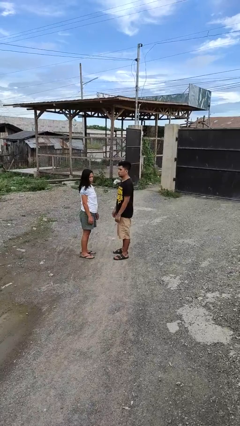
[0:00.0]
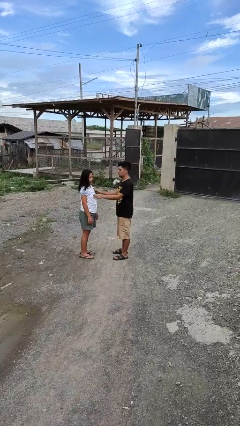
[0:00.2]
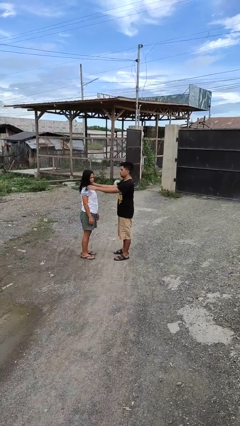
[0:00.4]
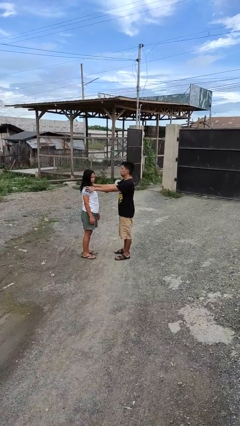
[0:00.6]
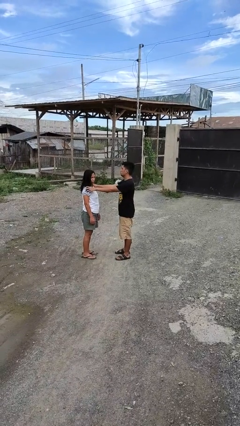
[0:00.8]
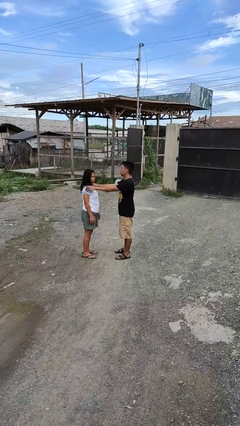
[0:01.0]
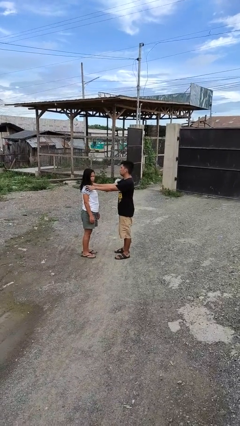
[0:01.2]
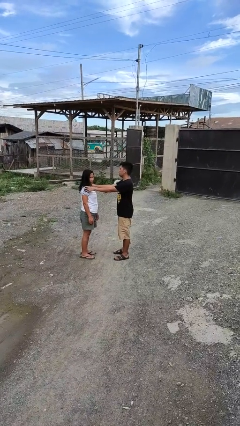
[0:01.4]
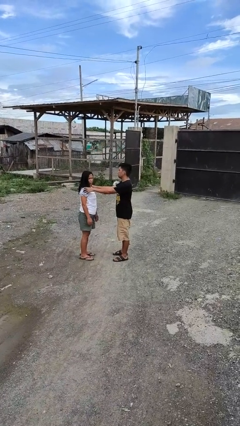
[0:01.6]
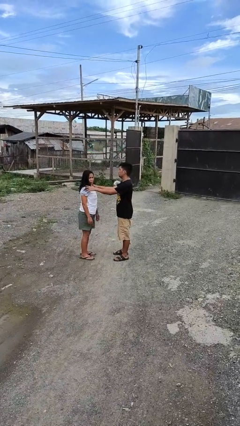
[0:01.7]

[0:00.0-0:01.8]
person grabs person by shoulder

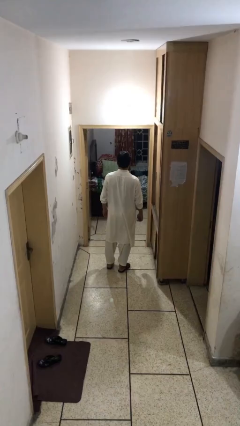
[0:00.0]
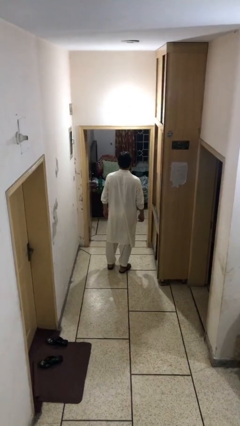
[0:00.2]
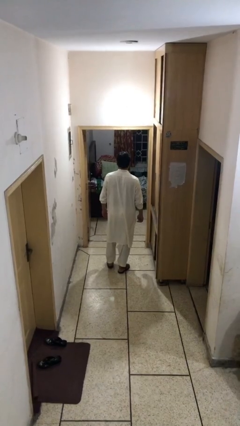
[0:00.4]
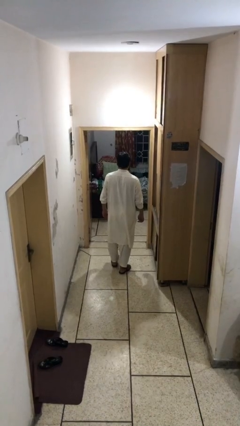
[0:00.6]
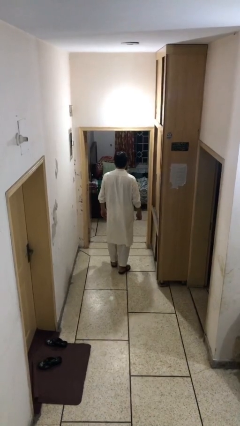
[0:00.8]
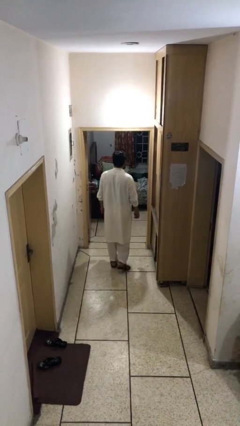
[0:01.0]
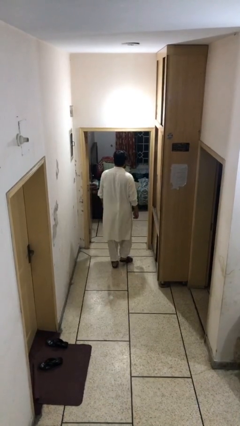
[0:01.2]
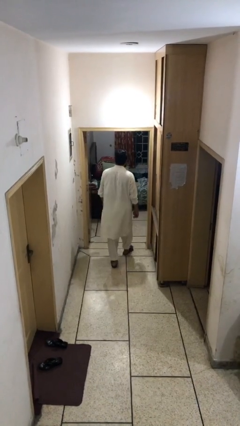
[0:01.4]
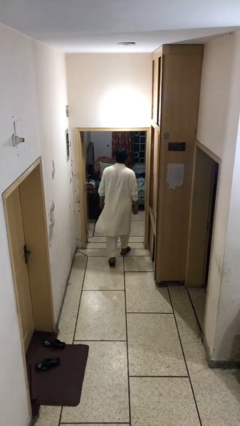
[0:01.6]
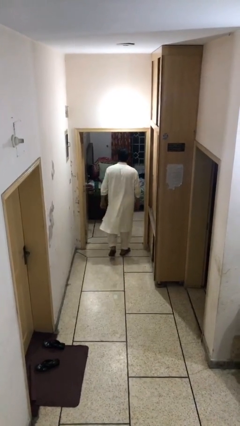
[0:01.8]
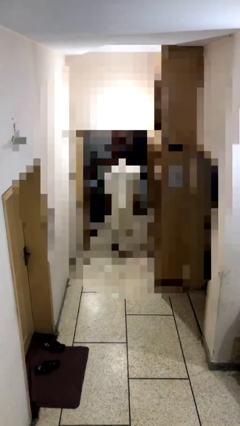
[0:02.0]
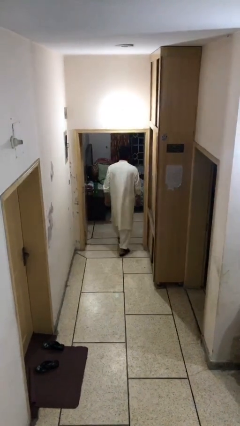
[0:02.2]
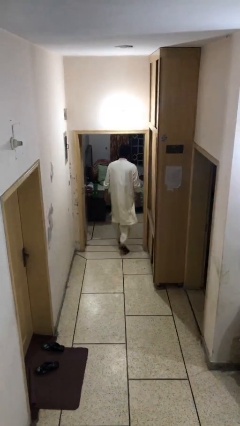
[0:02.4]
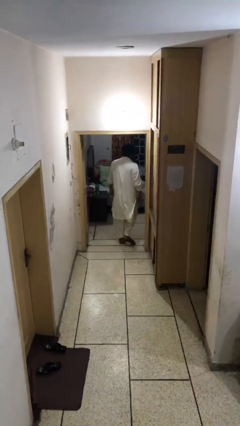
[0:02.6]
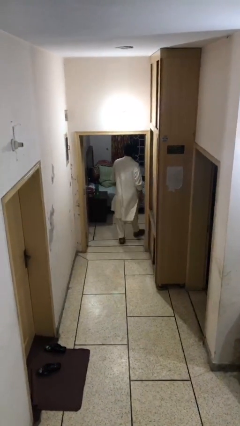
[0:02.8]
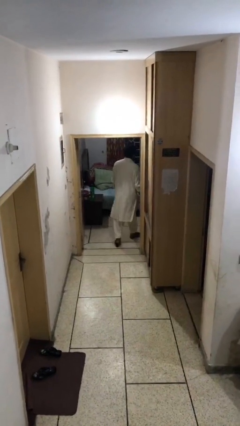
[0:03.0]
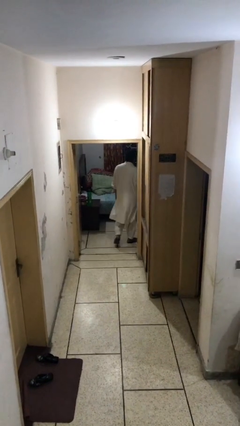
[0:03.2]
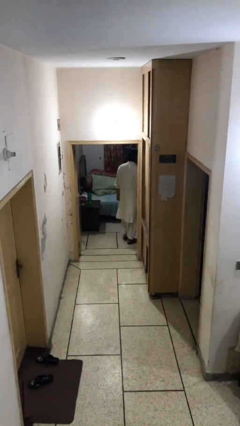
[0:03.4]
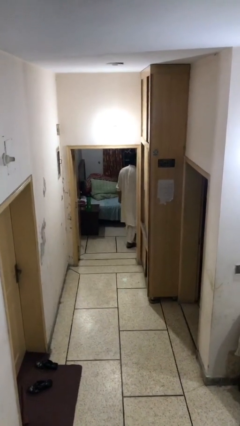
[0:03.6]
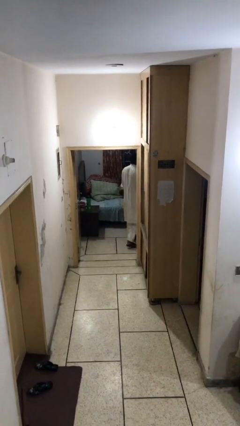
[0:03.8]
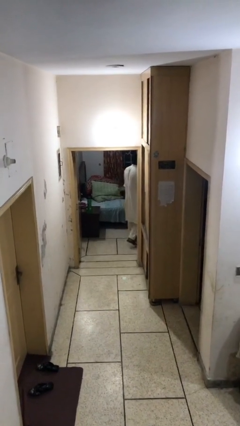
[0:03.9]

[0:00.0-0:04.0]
person exits scene through structure

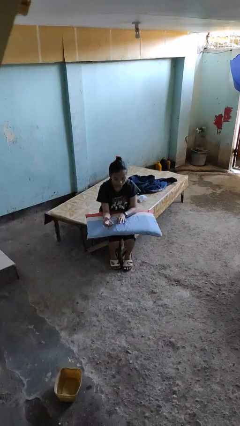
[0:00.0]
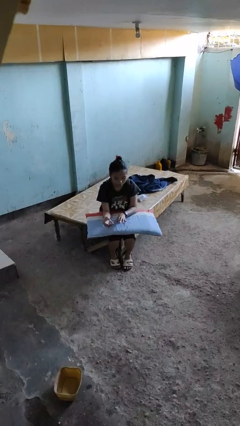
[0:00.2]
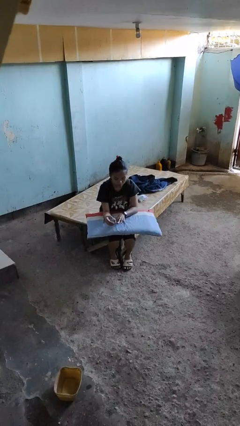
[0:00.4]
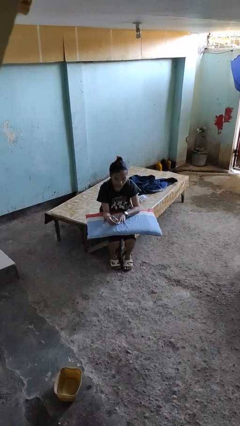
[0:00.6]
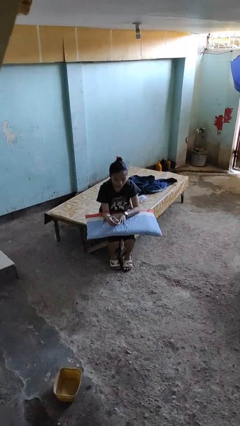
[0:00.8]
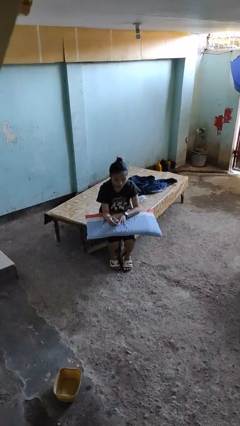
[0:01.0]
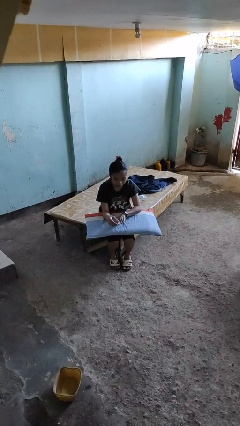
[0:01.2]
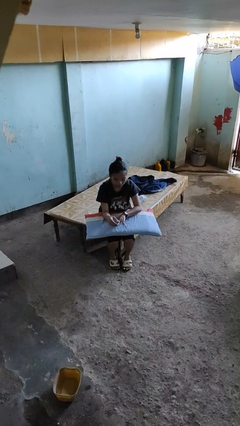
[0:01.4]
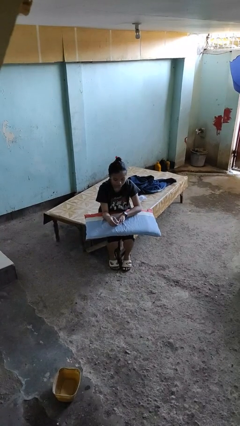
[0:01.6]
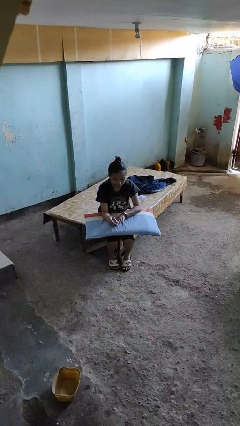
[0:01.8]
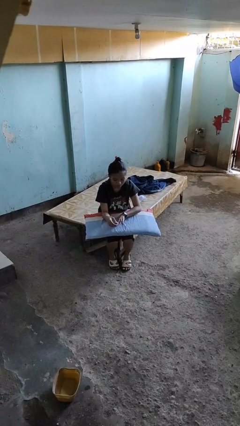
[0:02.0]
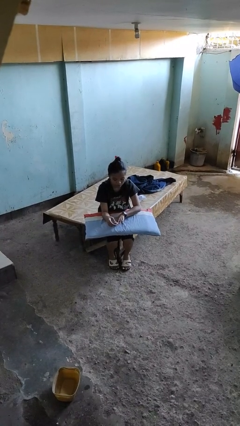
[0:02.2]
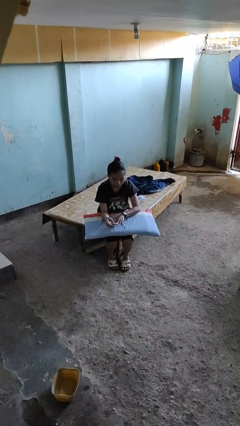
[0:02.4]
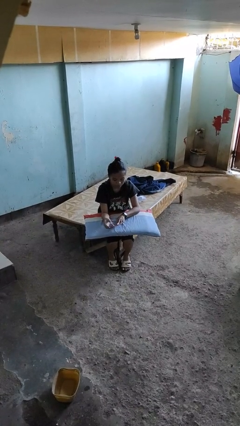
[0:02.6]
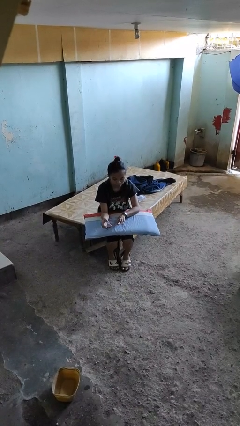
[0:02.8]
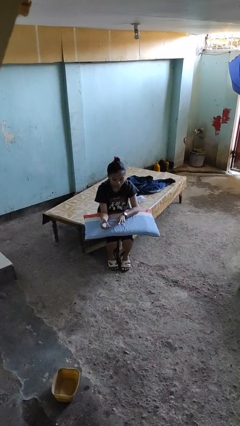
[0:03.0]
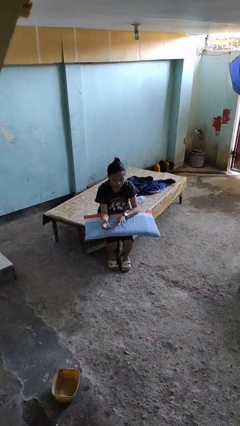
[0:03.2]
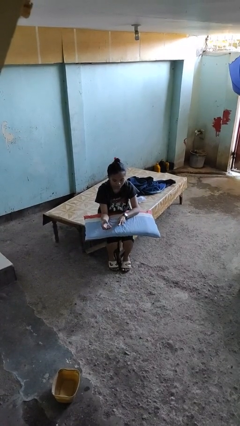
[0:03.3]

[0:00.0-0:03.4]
person clips fingernails

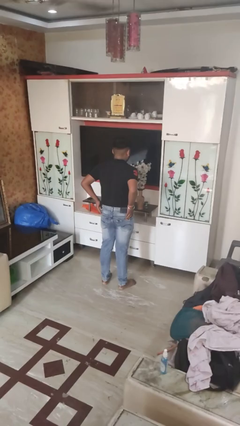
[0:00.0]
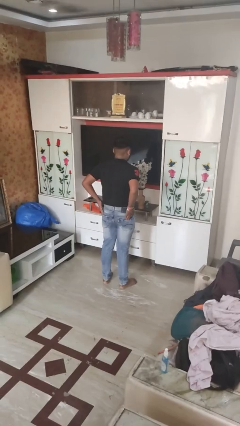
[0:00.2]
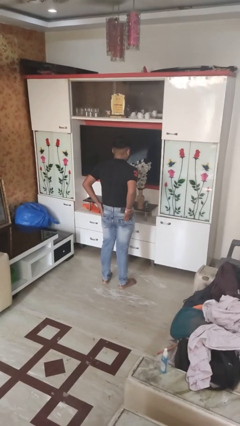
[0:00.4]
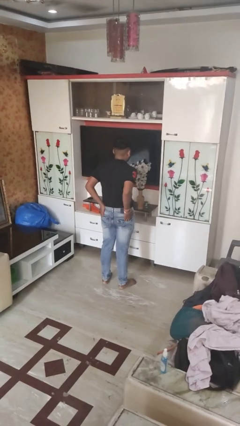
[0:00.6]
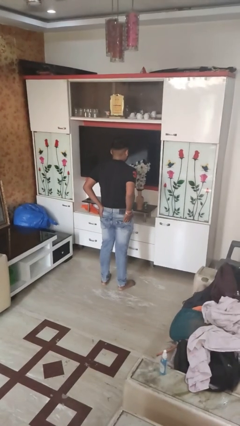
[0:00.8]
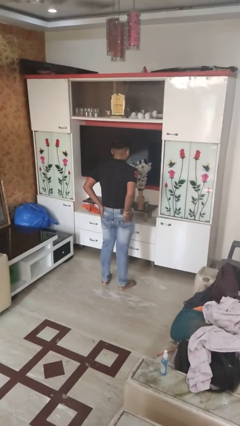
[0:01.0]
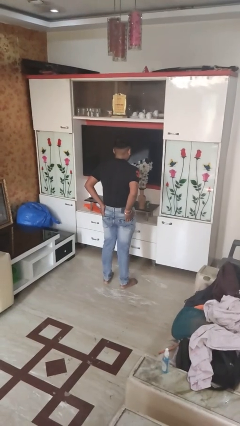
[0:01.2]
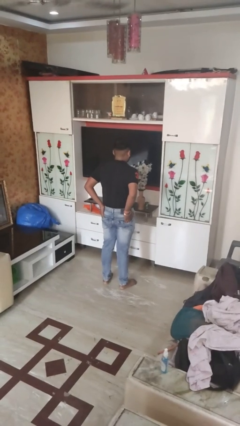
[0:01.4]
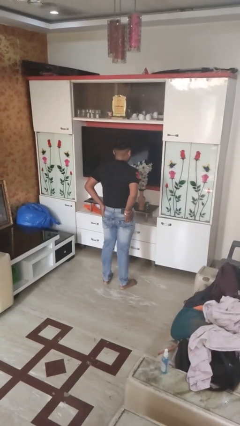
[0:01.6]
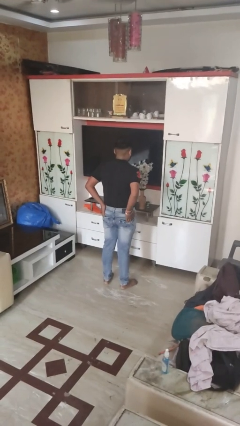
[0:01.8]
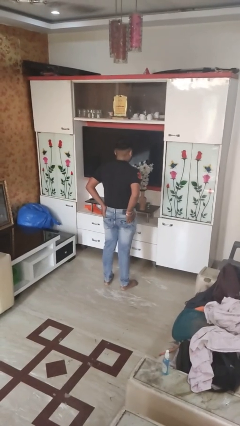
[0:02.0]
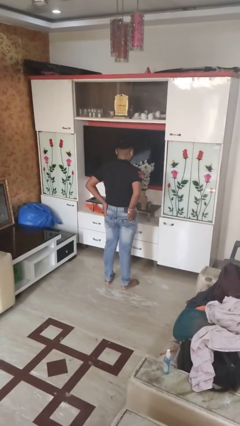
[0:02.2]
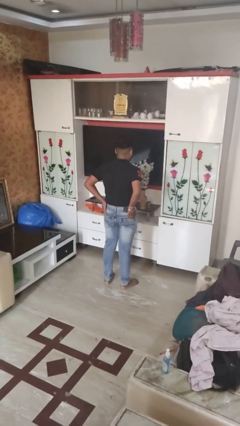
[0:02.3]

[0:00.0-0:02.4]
person puts hands in back pockets

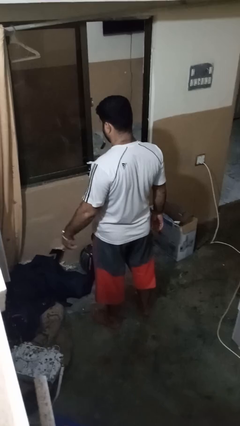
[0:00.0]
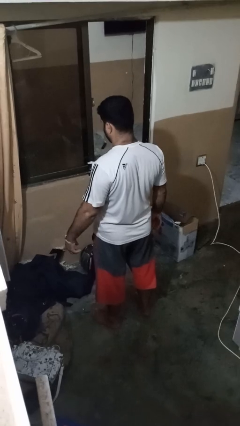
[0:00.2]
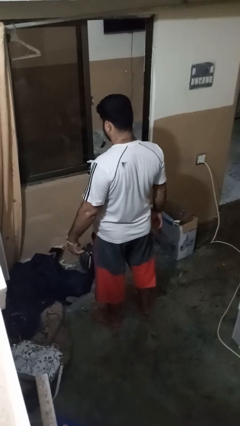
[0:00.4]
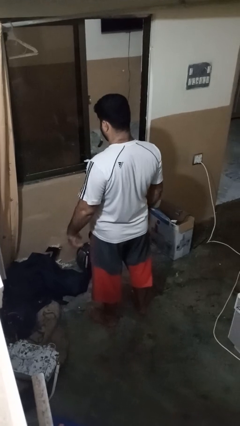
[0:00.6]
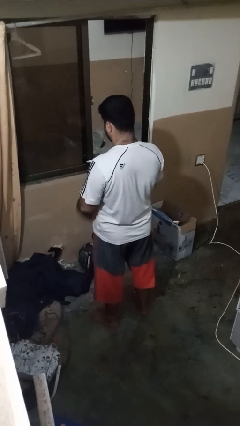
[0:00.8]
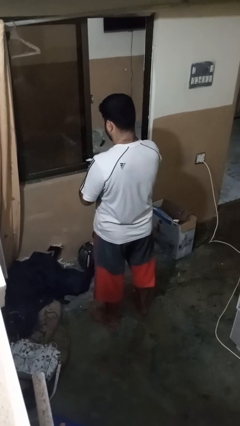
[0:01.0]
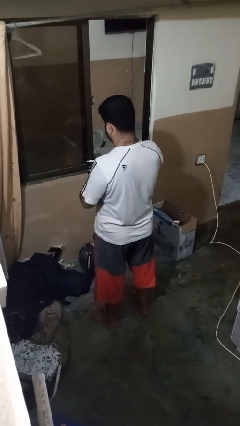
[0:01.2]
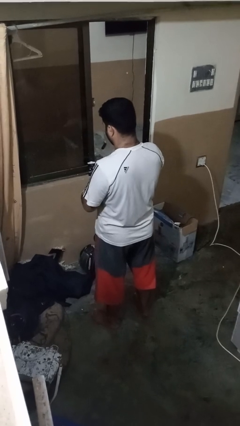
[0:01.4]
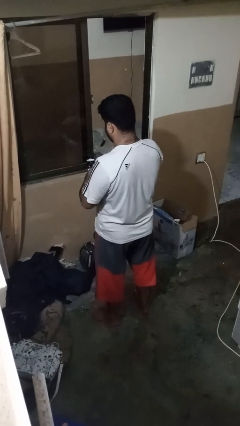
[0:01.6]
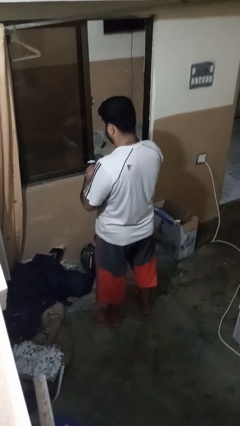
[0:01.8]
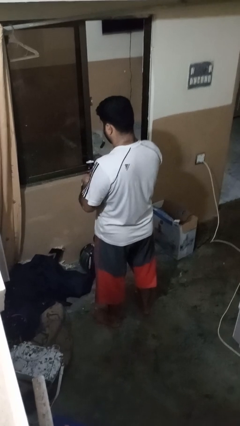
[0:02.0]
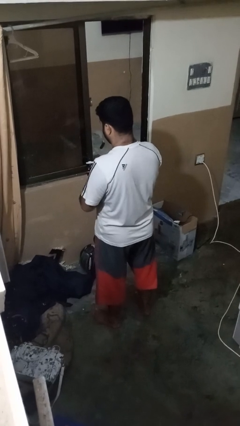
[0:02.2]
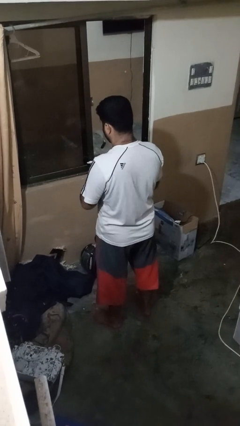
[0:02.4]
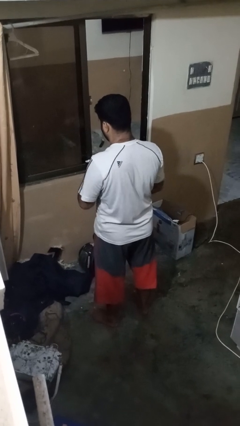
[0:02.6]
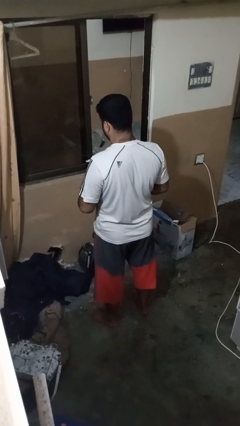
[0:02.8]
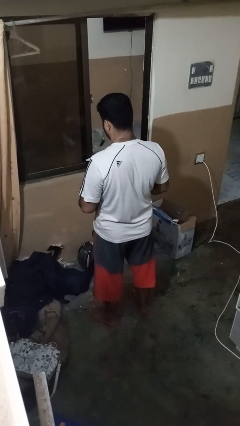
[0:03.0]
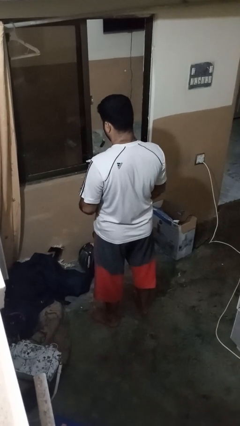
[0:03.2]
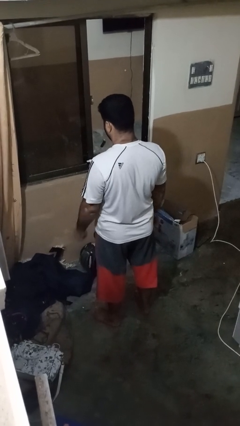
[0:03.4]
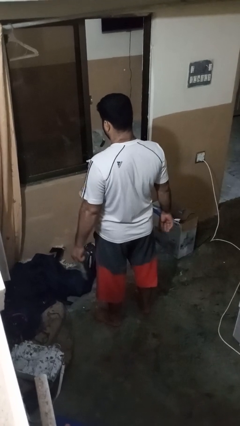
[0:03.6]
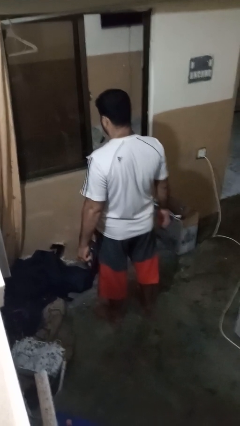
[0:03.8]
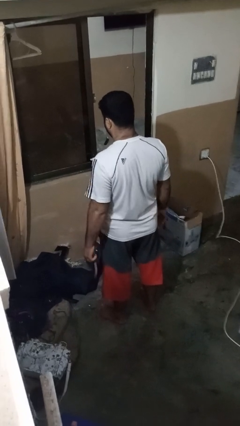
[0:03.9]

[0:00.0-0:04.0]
person takes off wristwatch

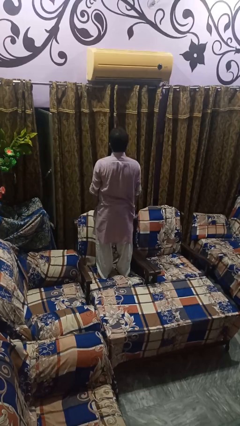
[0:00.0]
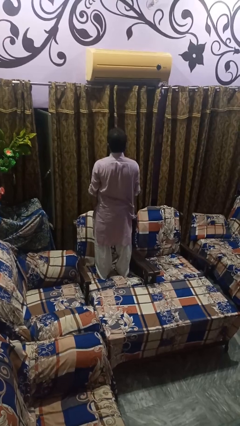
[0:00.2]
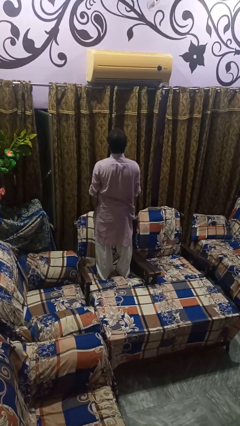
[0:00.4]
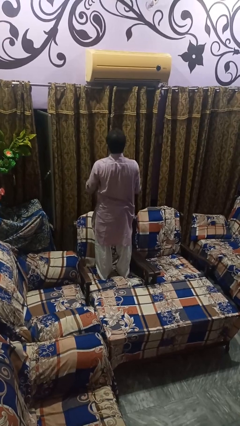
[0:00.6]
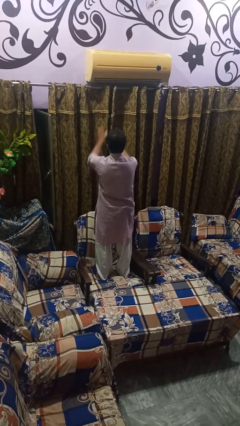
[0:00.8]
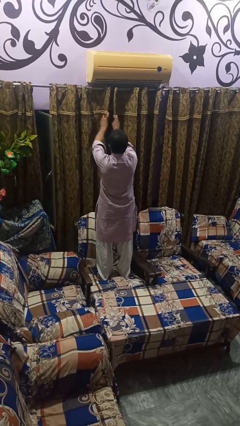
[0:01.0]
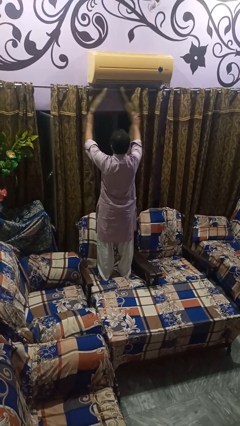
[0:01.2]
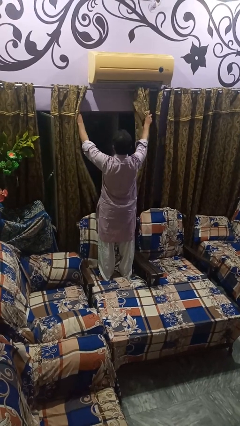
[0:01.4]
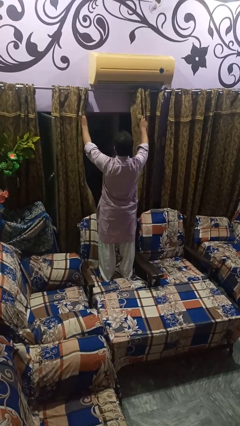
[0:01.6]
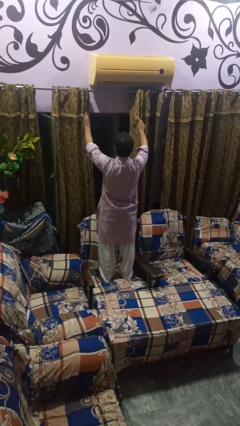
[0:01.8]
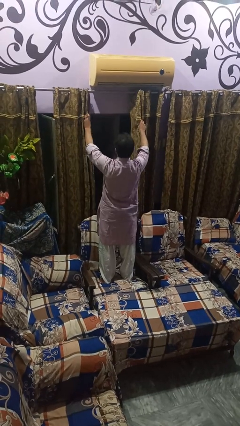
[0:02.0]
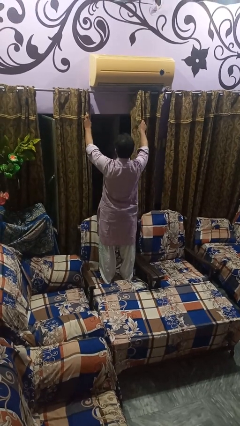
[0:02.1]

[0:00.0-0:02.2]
person opens curtains
